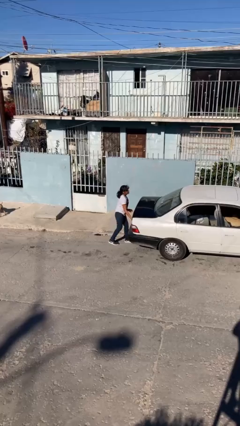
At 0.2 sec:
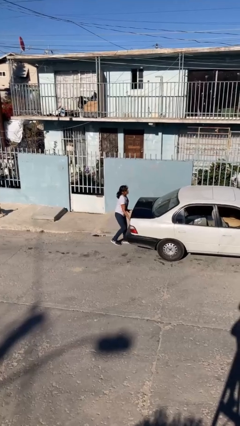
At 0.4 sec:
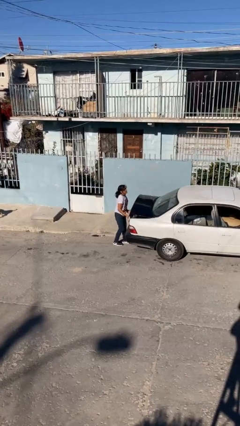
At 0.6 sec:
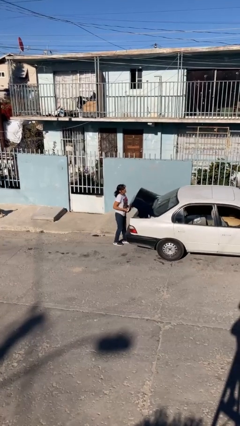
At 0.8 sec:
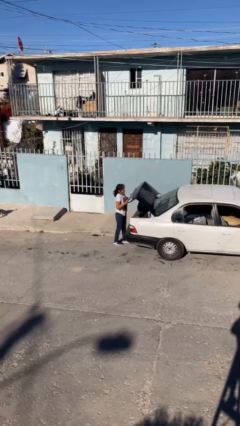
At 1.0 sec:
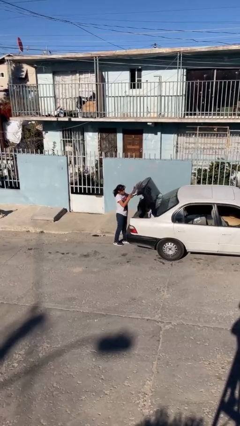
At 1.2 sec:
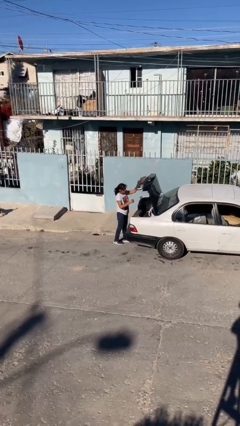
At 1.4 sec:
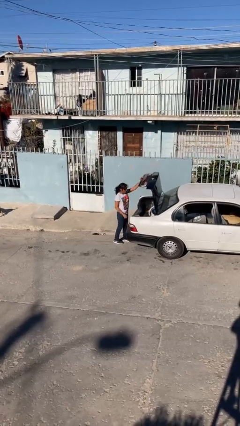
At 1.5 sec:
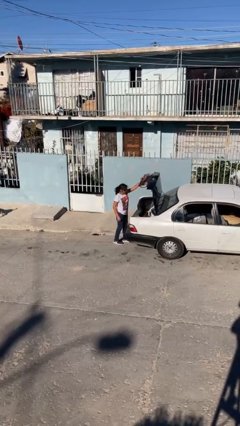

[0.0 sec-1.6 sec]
person opens car trunk

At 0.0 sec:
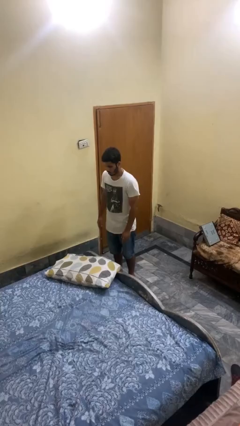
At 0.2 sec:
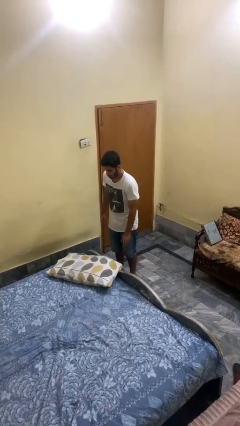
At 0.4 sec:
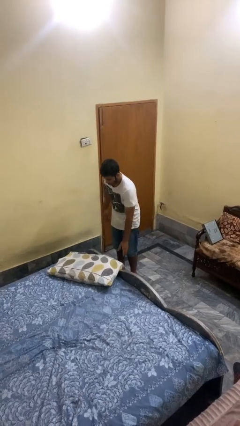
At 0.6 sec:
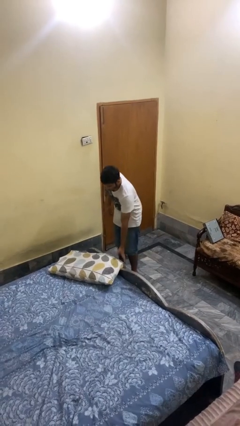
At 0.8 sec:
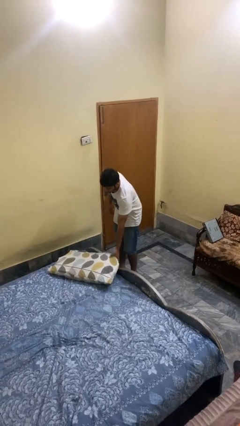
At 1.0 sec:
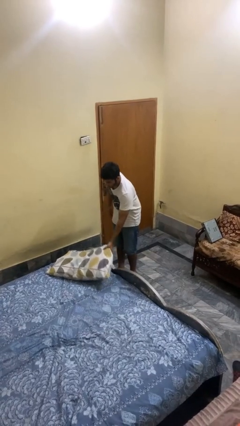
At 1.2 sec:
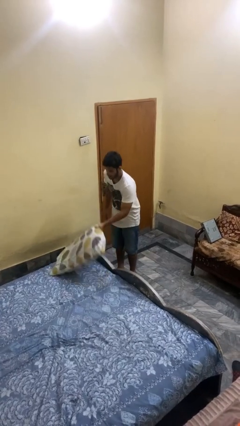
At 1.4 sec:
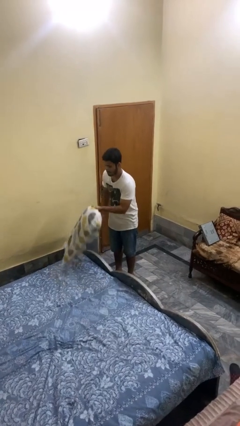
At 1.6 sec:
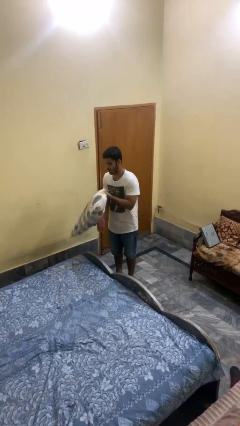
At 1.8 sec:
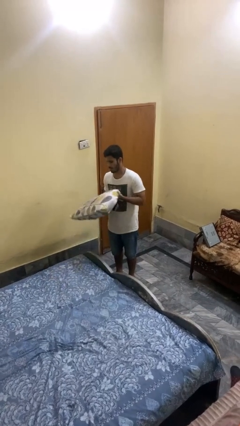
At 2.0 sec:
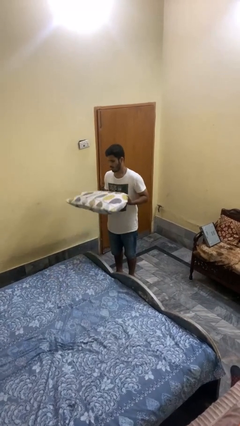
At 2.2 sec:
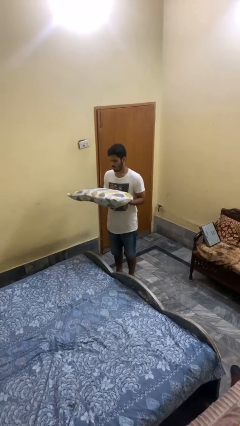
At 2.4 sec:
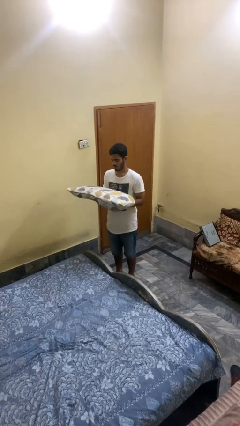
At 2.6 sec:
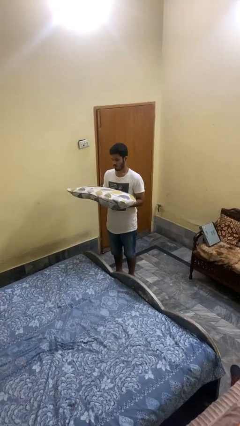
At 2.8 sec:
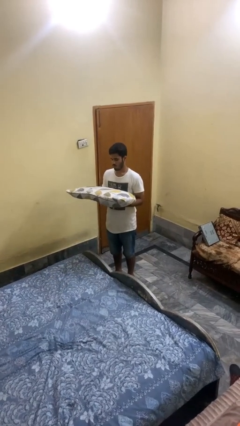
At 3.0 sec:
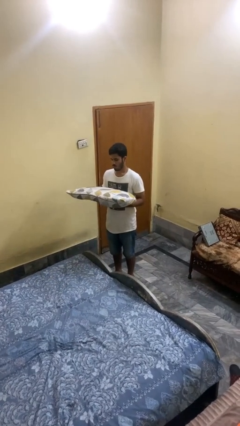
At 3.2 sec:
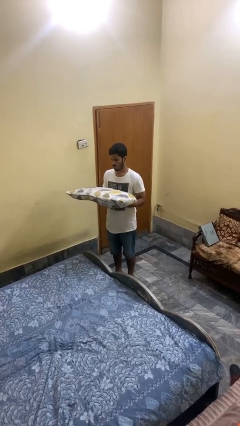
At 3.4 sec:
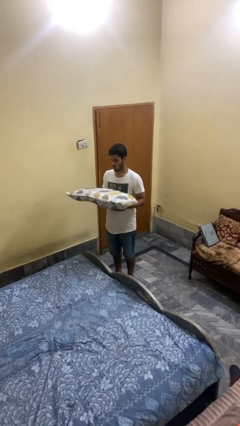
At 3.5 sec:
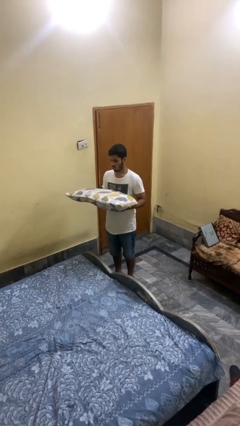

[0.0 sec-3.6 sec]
person picks up object from bed

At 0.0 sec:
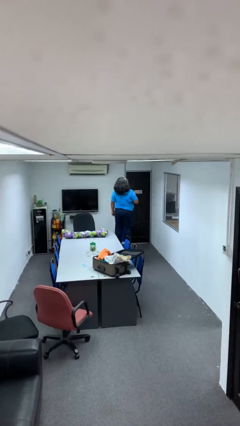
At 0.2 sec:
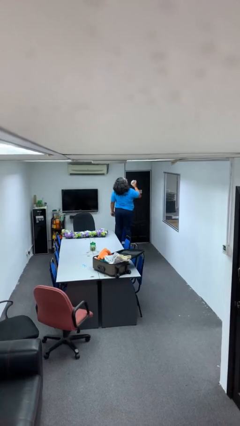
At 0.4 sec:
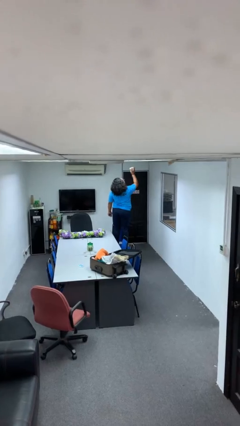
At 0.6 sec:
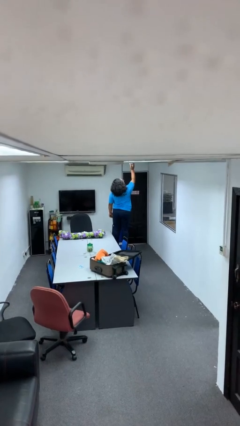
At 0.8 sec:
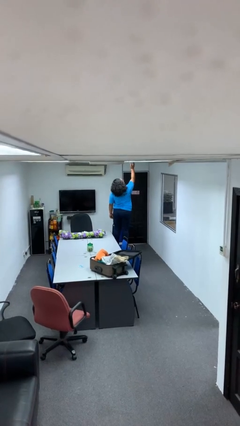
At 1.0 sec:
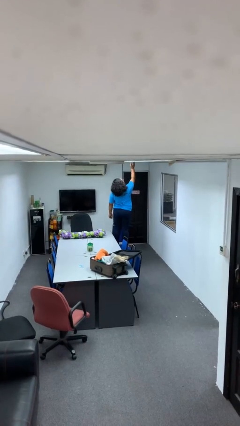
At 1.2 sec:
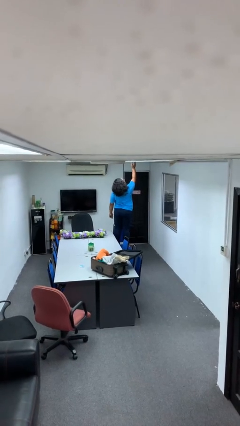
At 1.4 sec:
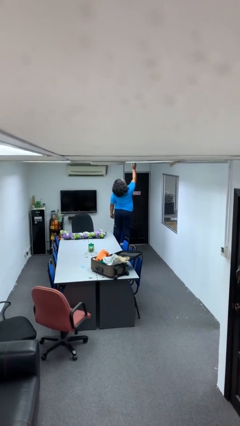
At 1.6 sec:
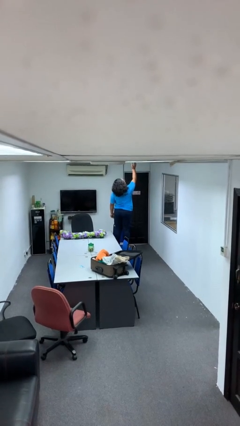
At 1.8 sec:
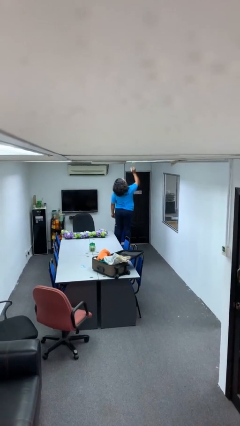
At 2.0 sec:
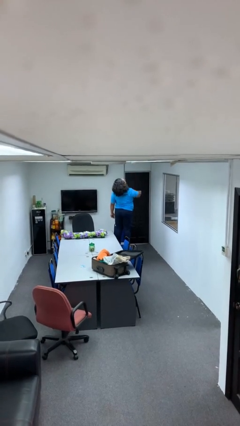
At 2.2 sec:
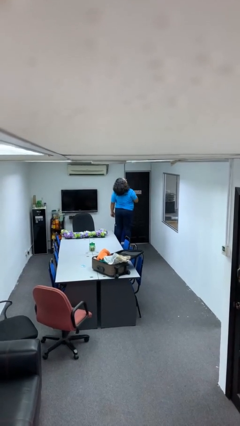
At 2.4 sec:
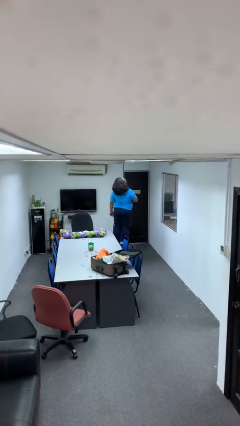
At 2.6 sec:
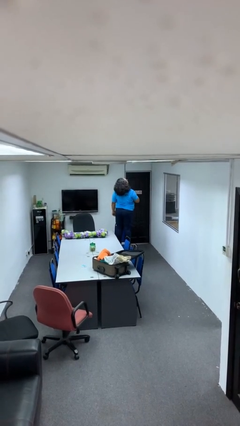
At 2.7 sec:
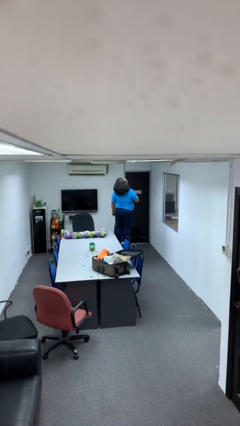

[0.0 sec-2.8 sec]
person puts up smoke detector

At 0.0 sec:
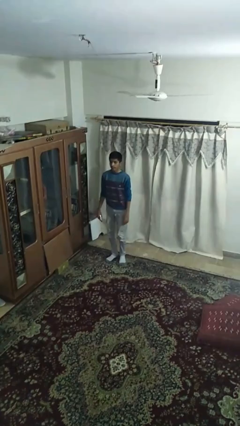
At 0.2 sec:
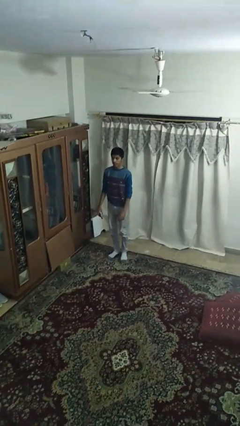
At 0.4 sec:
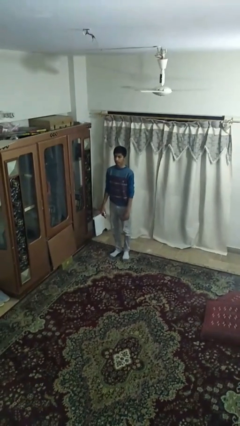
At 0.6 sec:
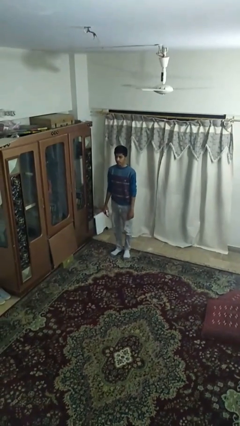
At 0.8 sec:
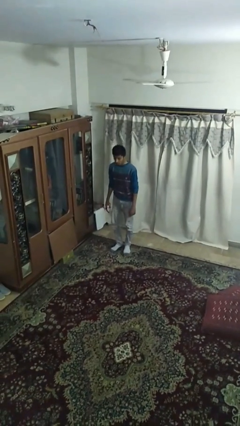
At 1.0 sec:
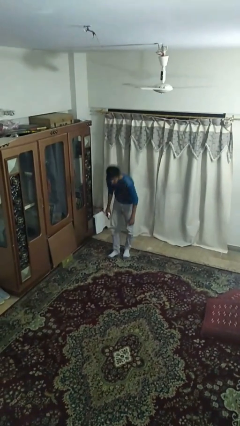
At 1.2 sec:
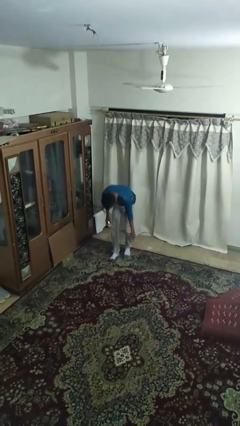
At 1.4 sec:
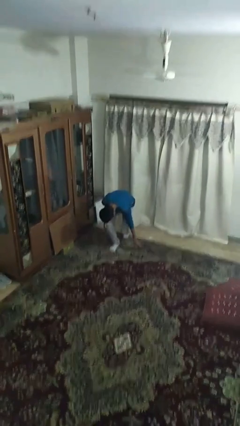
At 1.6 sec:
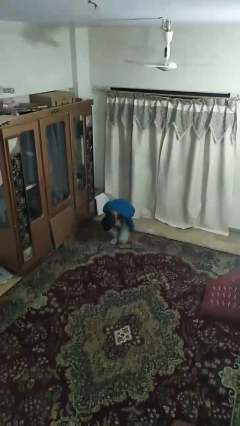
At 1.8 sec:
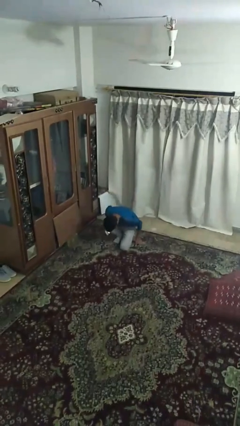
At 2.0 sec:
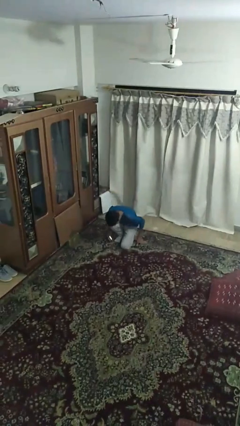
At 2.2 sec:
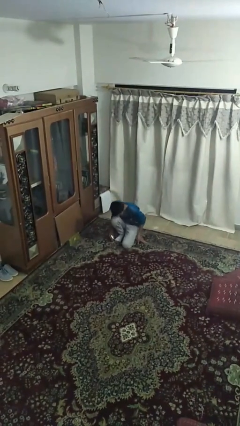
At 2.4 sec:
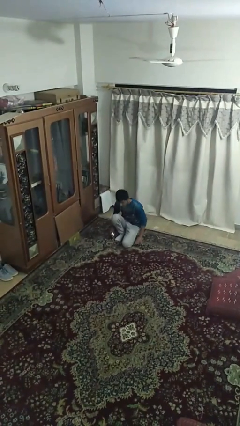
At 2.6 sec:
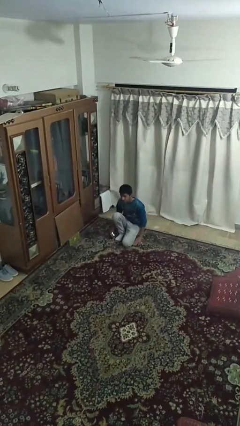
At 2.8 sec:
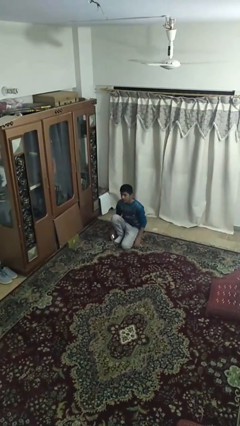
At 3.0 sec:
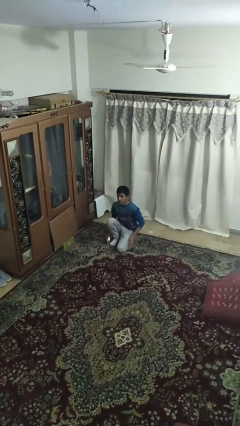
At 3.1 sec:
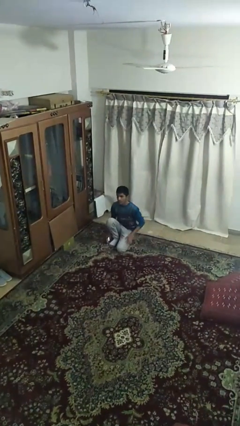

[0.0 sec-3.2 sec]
person sits down

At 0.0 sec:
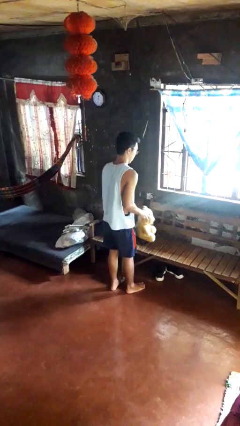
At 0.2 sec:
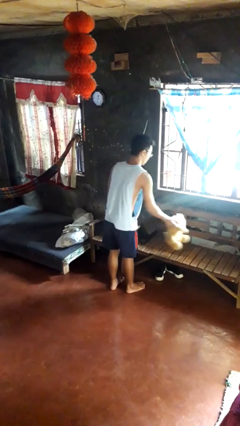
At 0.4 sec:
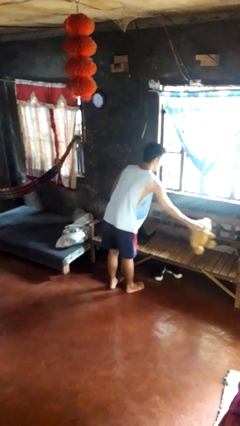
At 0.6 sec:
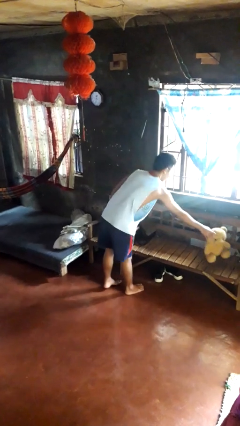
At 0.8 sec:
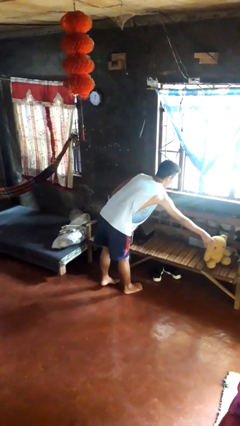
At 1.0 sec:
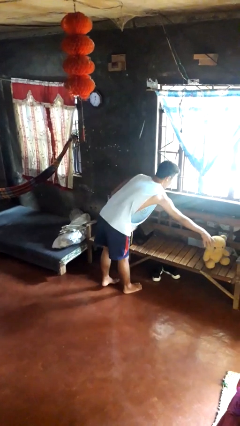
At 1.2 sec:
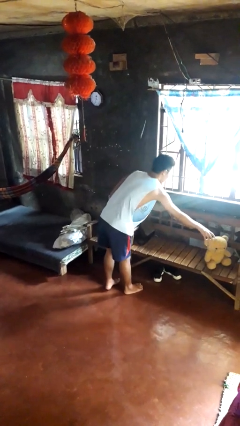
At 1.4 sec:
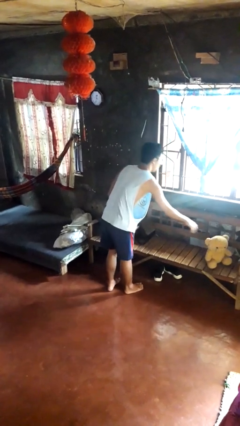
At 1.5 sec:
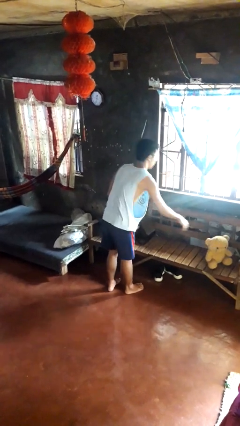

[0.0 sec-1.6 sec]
person puts down object on couch

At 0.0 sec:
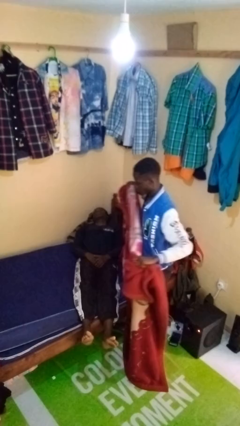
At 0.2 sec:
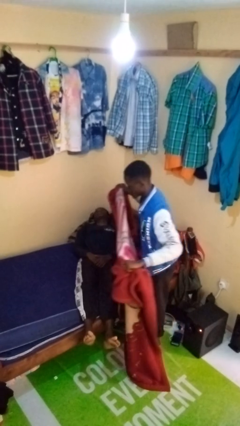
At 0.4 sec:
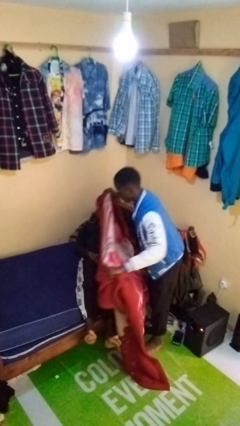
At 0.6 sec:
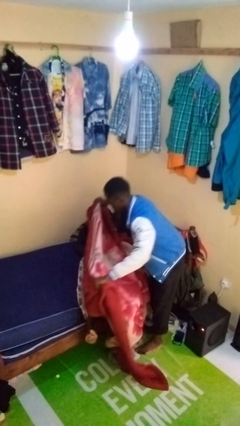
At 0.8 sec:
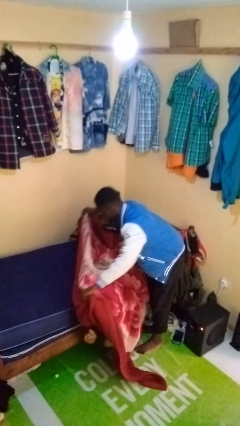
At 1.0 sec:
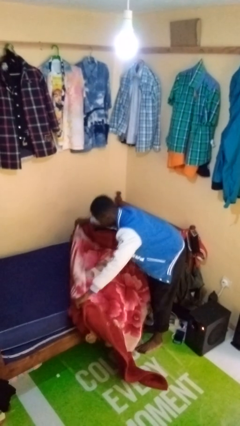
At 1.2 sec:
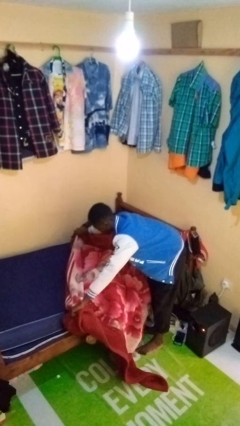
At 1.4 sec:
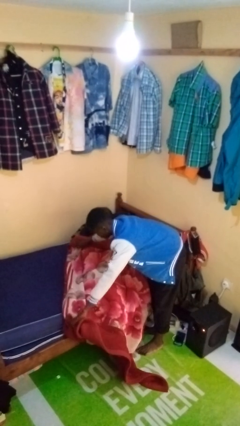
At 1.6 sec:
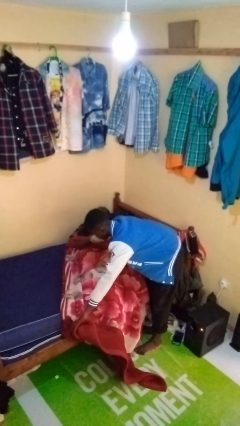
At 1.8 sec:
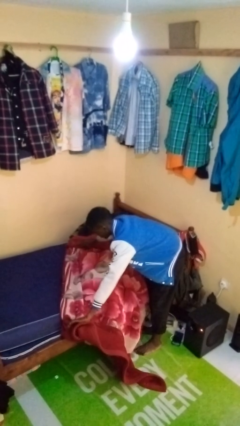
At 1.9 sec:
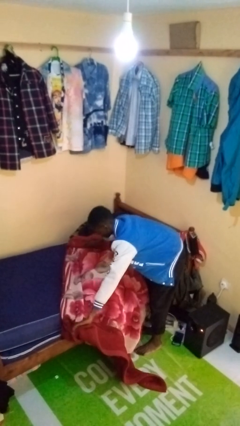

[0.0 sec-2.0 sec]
person covers friend with blanket

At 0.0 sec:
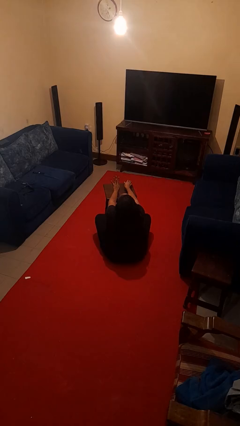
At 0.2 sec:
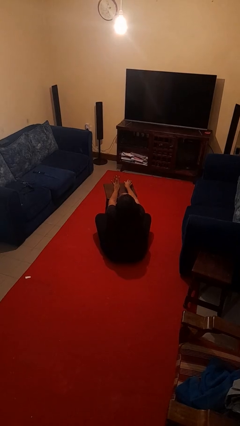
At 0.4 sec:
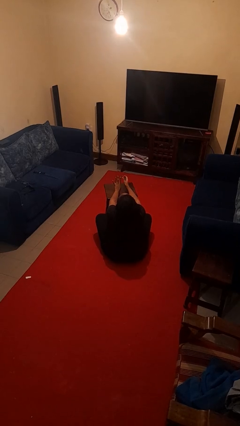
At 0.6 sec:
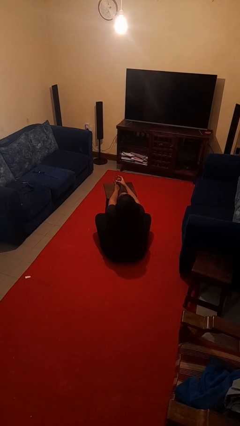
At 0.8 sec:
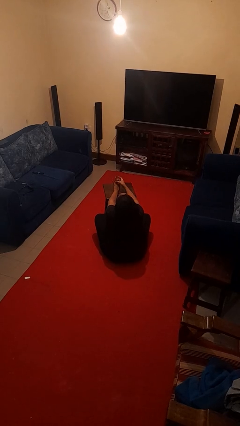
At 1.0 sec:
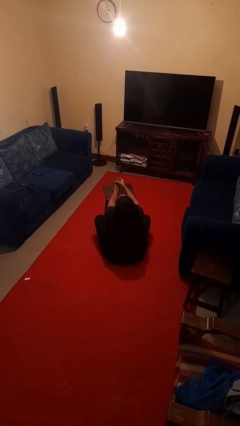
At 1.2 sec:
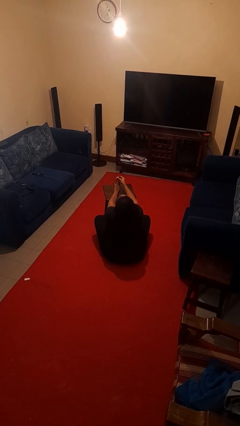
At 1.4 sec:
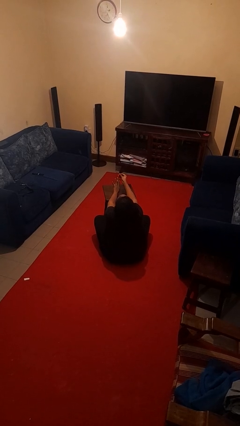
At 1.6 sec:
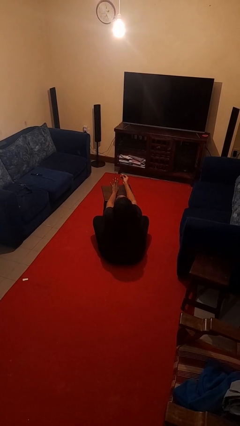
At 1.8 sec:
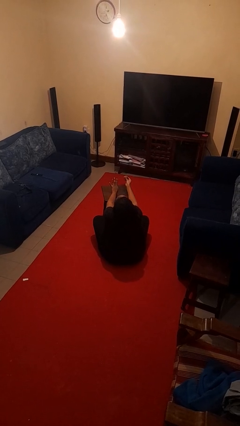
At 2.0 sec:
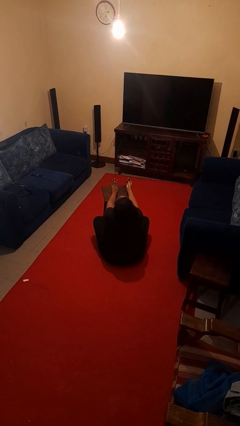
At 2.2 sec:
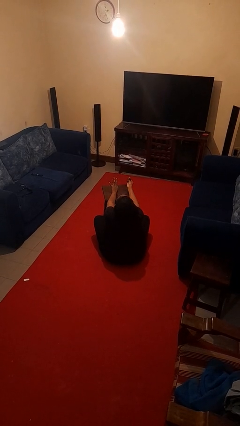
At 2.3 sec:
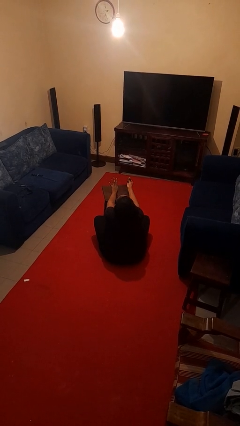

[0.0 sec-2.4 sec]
person takes off ring
